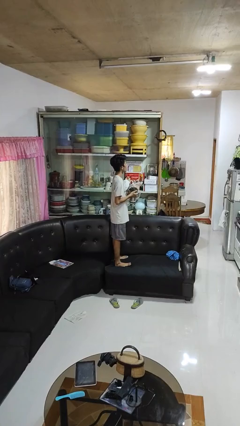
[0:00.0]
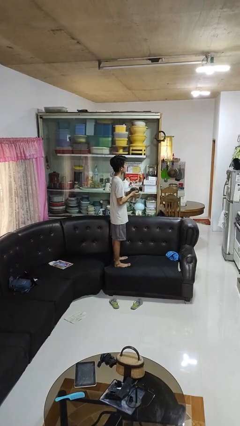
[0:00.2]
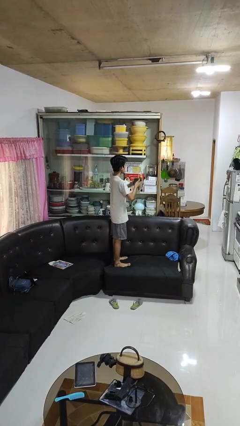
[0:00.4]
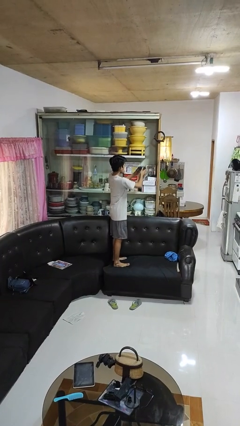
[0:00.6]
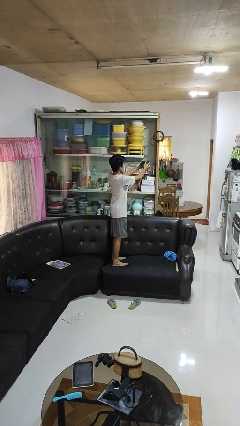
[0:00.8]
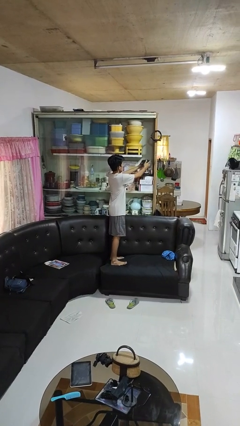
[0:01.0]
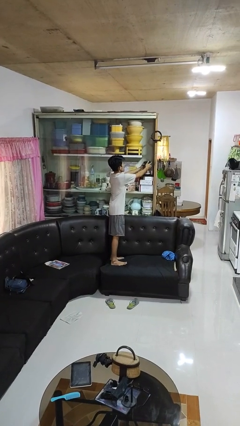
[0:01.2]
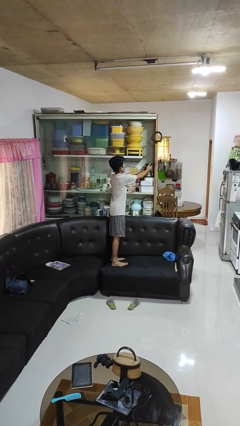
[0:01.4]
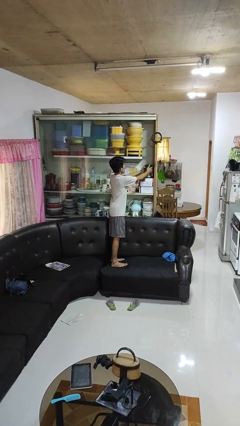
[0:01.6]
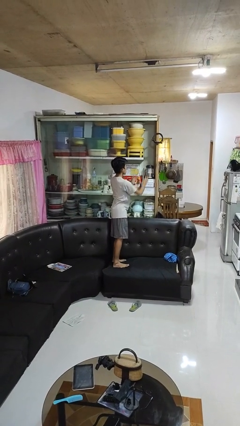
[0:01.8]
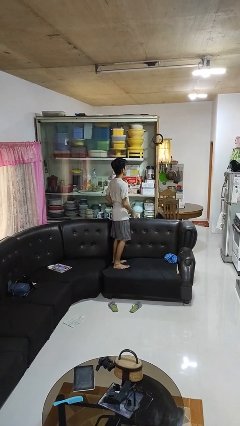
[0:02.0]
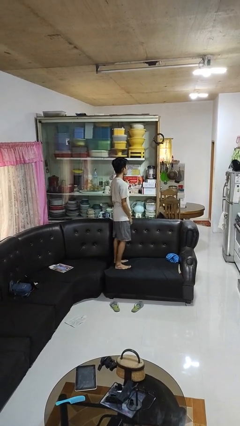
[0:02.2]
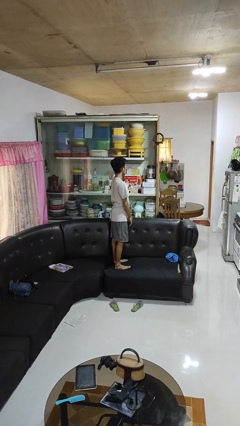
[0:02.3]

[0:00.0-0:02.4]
person puts down object into cabinet

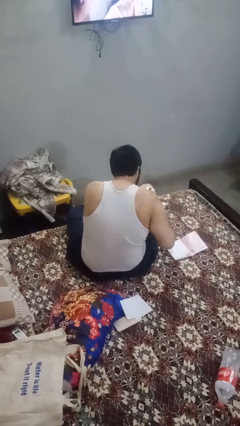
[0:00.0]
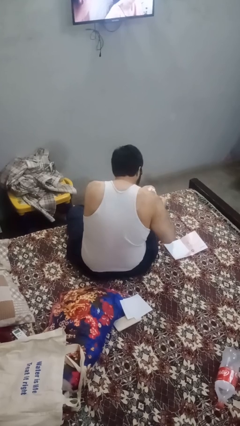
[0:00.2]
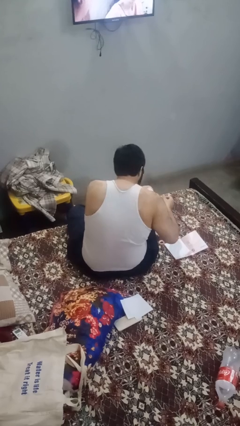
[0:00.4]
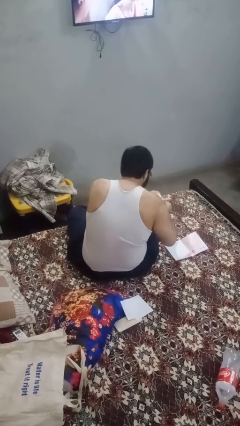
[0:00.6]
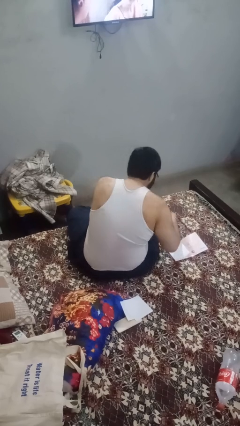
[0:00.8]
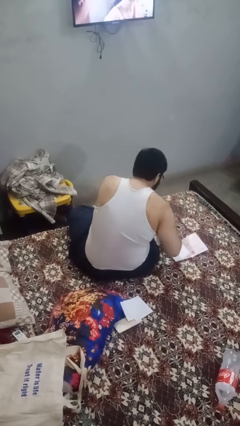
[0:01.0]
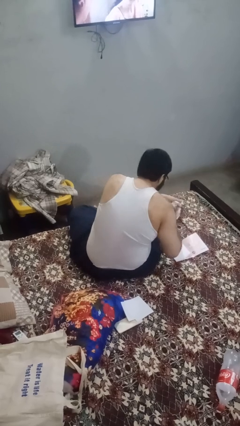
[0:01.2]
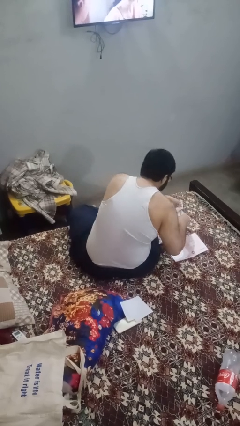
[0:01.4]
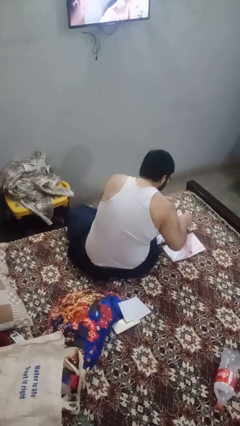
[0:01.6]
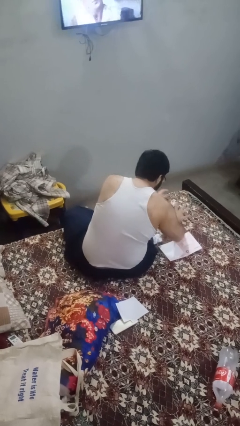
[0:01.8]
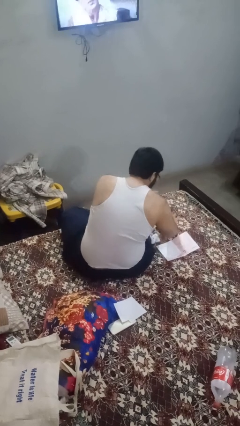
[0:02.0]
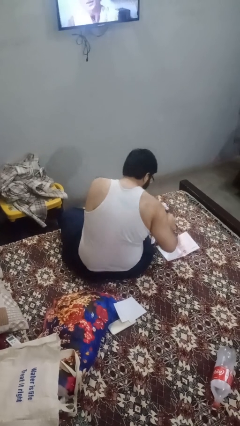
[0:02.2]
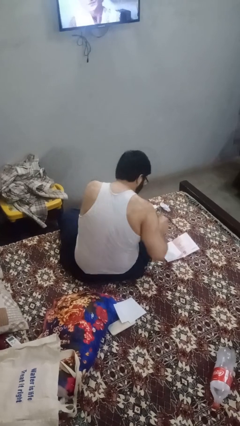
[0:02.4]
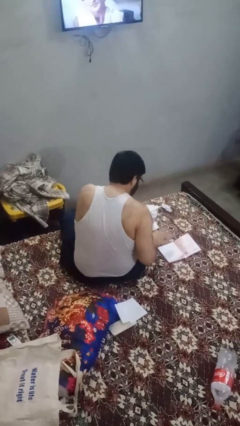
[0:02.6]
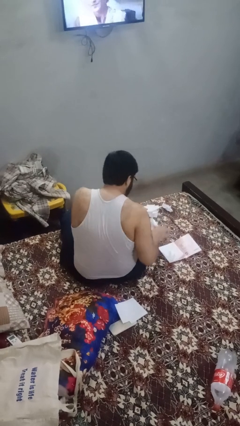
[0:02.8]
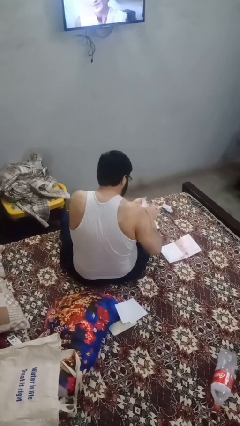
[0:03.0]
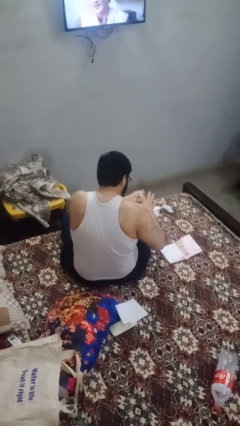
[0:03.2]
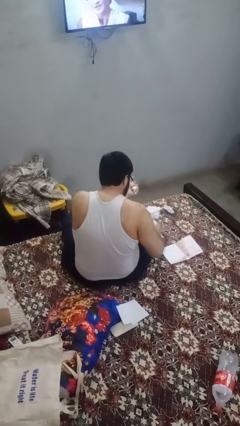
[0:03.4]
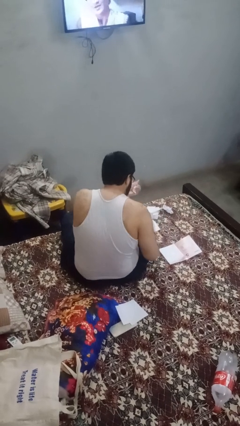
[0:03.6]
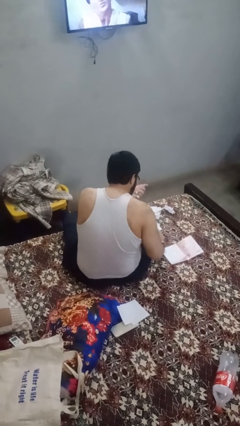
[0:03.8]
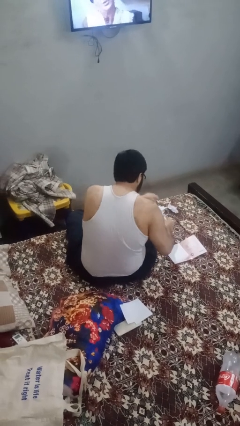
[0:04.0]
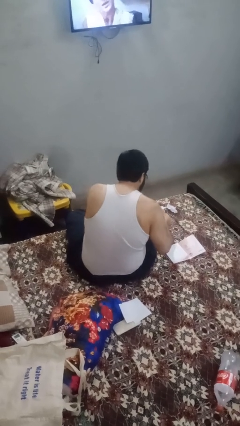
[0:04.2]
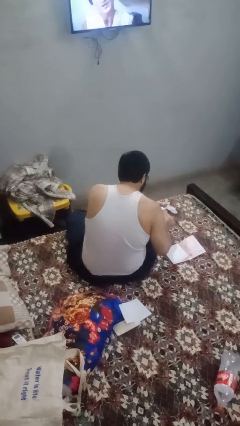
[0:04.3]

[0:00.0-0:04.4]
person crumples paper

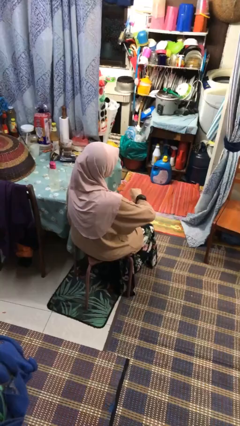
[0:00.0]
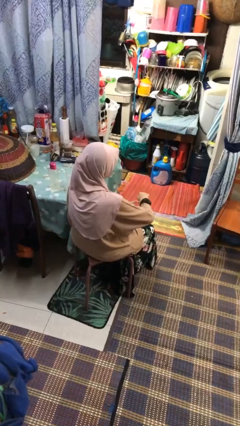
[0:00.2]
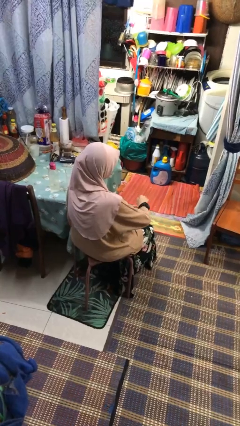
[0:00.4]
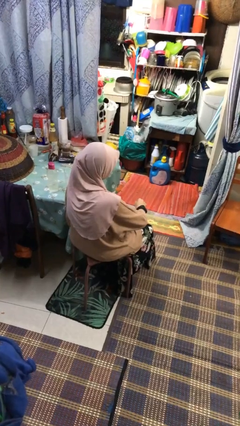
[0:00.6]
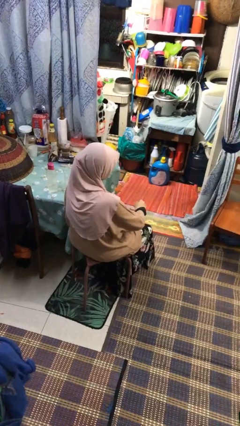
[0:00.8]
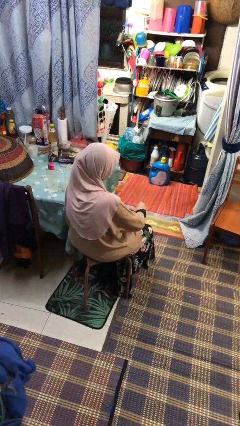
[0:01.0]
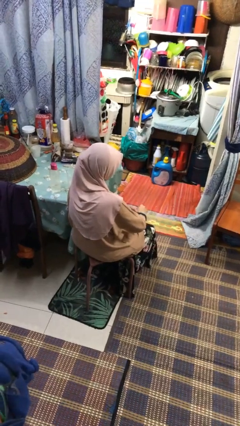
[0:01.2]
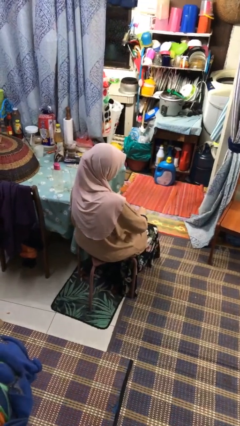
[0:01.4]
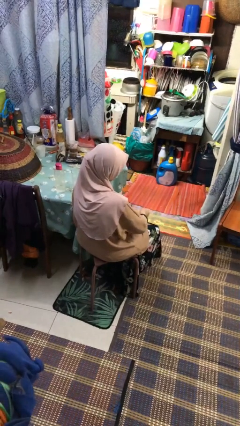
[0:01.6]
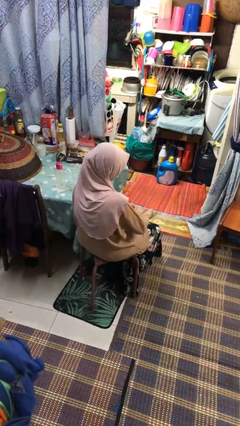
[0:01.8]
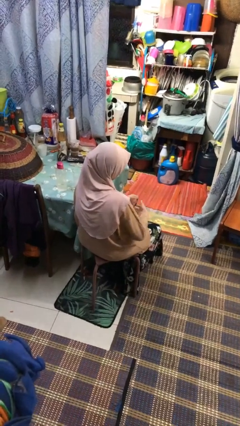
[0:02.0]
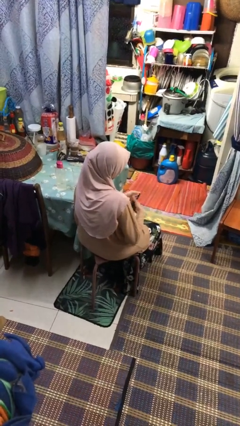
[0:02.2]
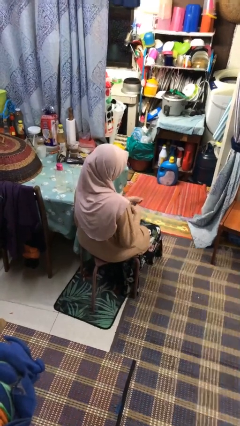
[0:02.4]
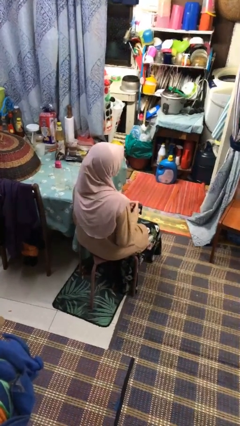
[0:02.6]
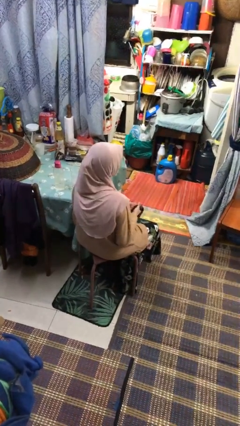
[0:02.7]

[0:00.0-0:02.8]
person takes off wristwatch

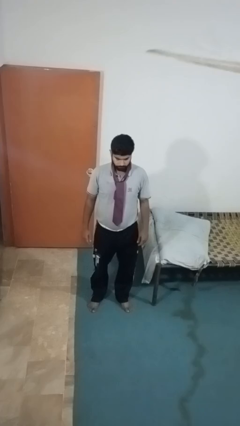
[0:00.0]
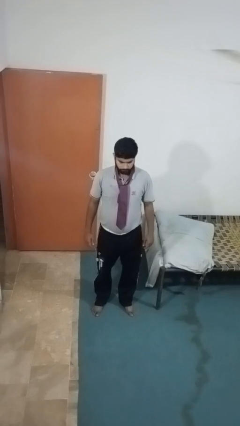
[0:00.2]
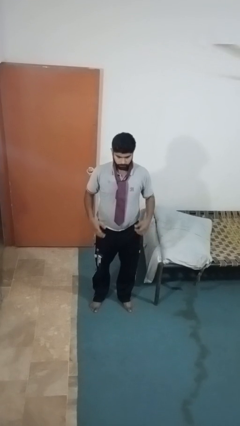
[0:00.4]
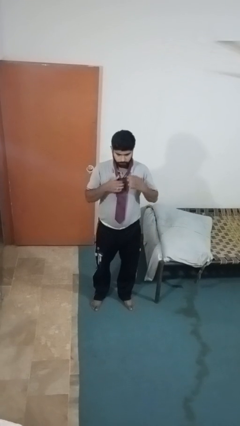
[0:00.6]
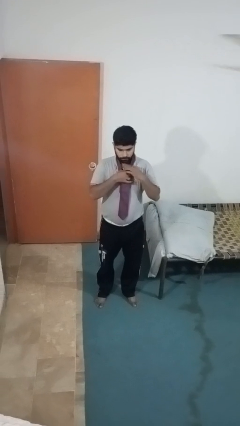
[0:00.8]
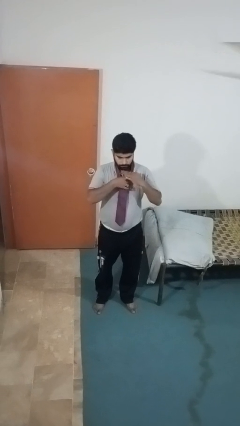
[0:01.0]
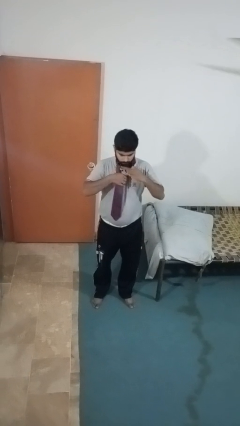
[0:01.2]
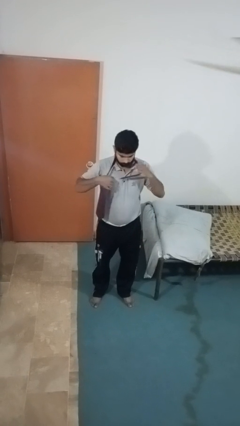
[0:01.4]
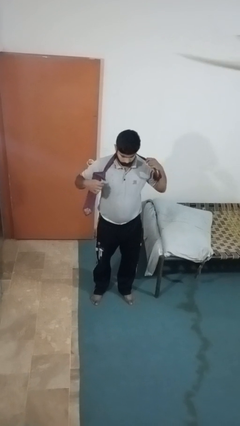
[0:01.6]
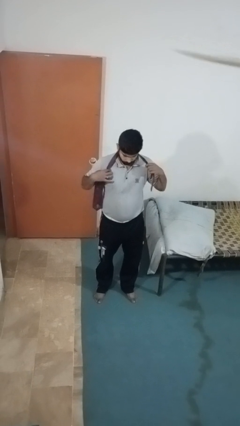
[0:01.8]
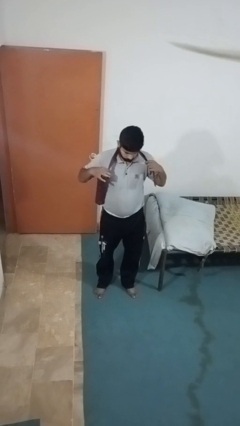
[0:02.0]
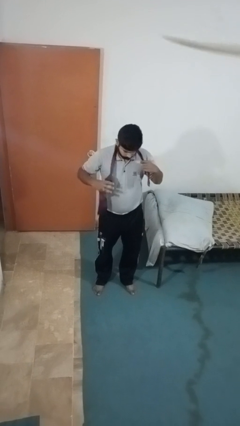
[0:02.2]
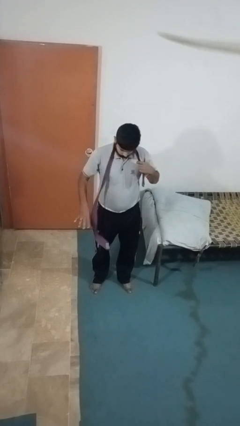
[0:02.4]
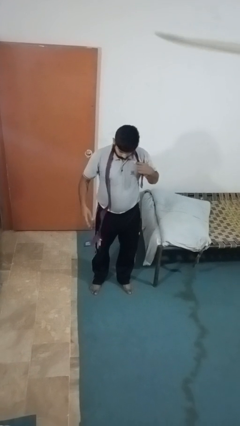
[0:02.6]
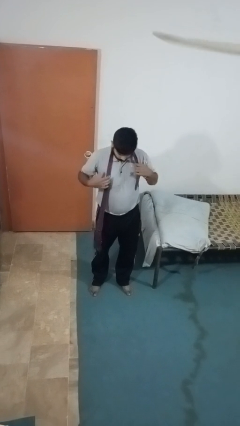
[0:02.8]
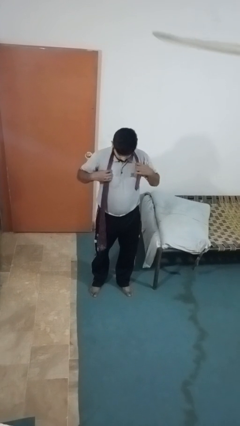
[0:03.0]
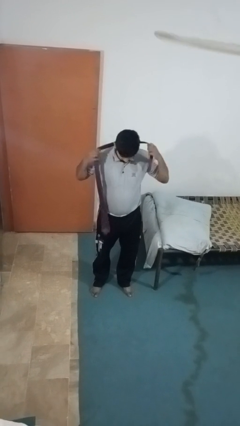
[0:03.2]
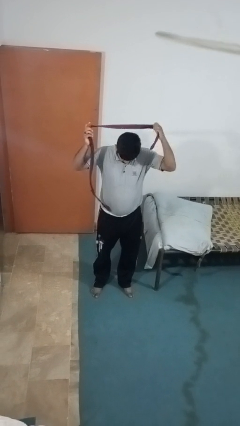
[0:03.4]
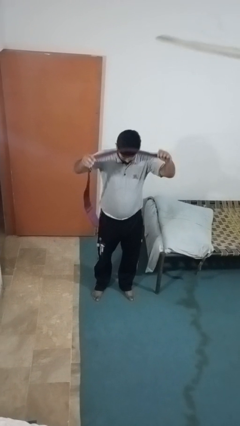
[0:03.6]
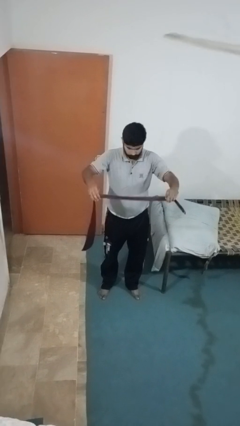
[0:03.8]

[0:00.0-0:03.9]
person takes off necktie

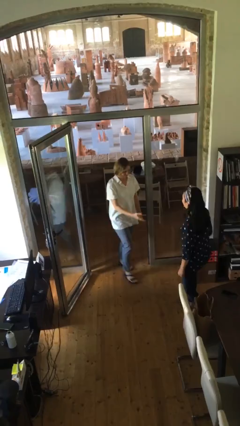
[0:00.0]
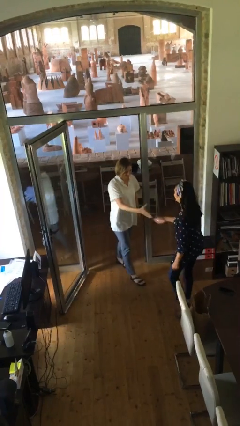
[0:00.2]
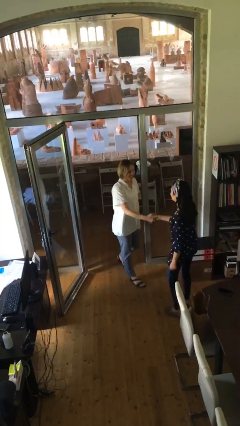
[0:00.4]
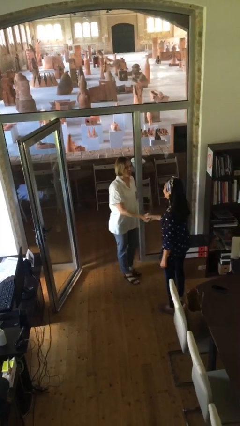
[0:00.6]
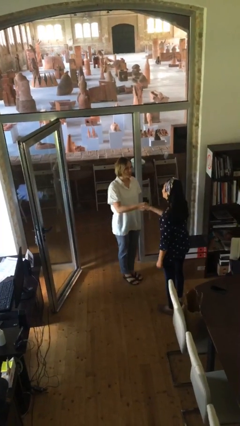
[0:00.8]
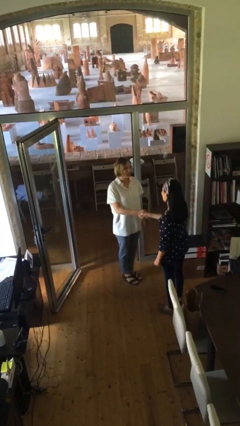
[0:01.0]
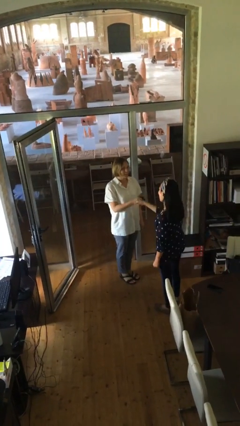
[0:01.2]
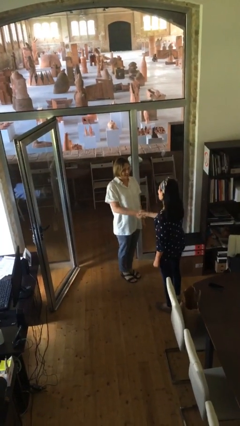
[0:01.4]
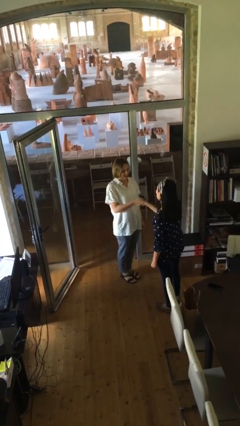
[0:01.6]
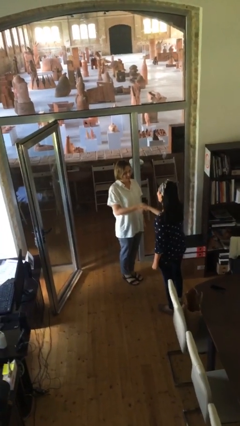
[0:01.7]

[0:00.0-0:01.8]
person shakes hand

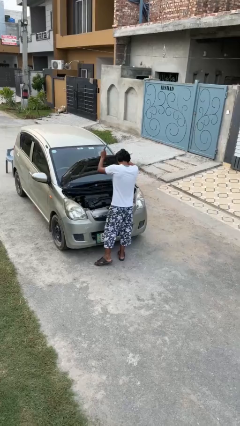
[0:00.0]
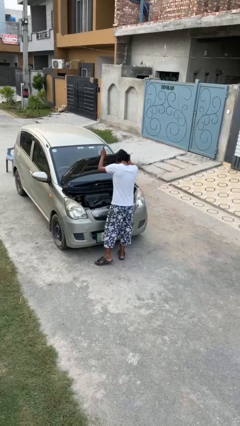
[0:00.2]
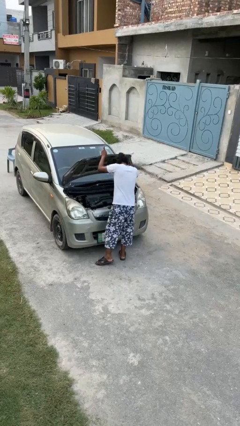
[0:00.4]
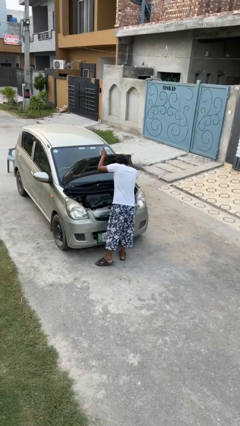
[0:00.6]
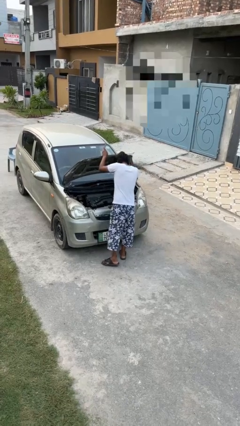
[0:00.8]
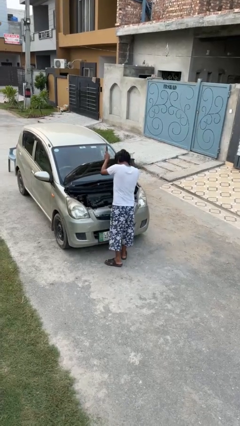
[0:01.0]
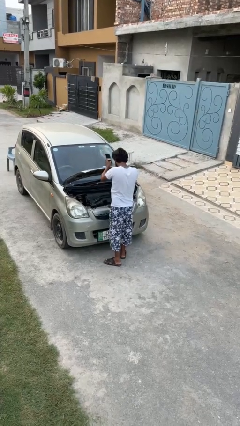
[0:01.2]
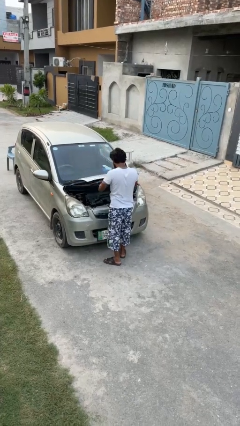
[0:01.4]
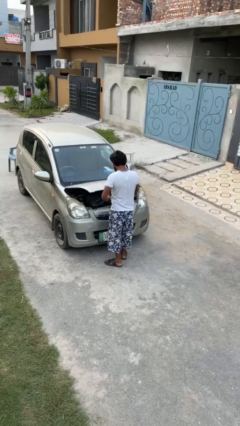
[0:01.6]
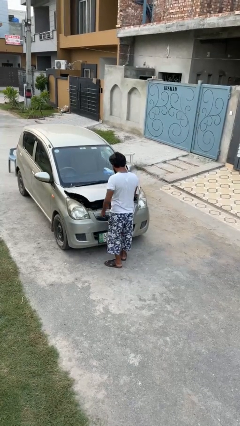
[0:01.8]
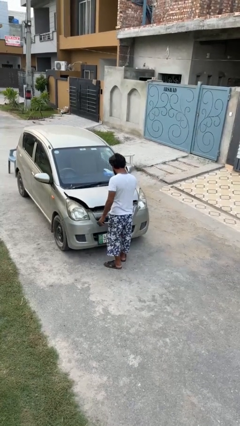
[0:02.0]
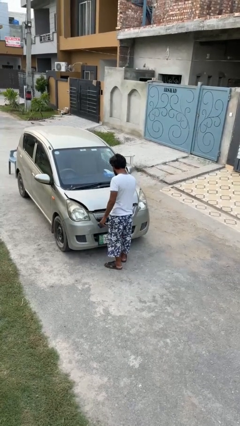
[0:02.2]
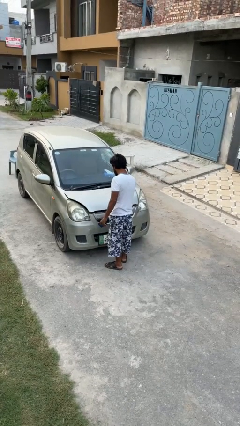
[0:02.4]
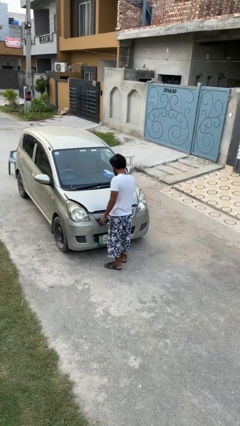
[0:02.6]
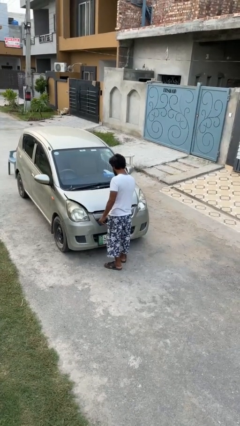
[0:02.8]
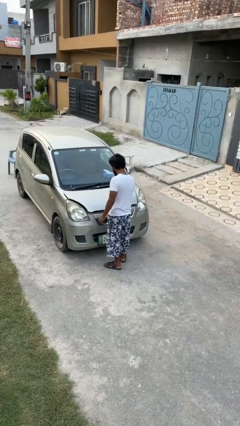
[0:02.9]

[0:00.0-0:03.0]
person closes car hood
